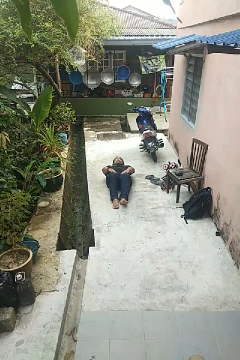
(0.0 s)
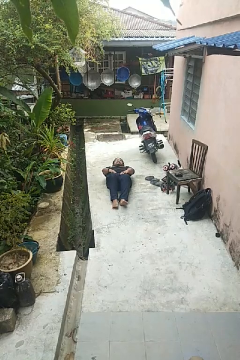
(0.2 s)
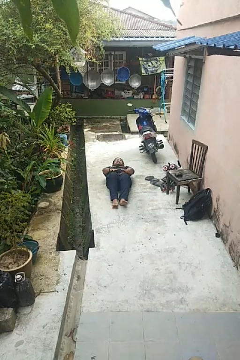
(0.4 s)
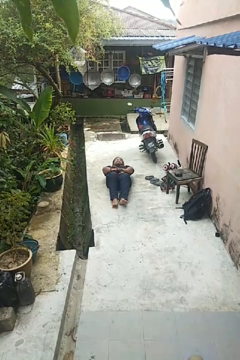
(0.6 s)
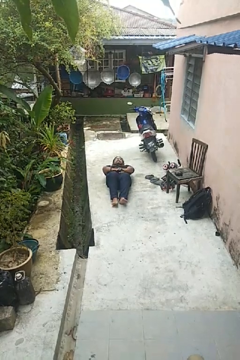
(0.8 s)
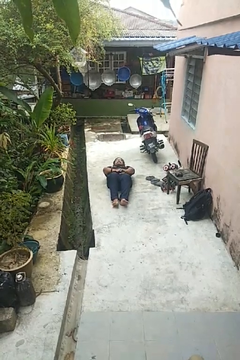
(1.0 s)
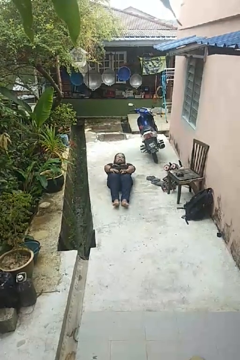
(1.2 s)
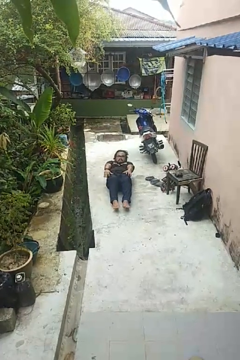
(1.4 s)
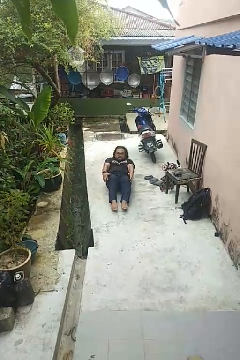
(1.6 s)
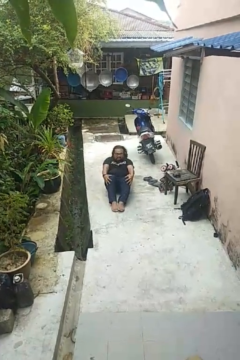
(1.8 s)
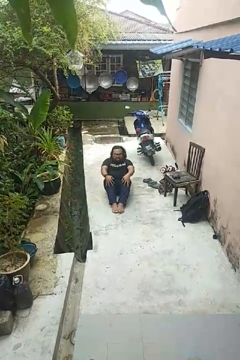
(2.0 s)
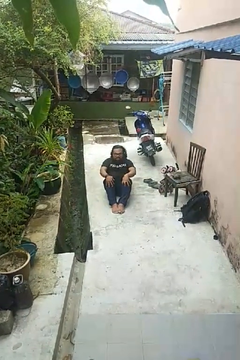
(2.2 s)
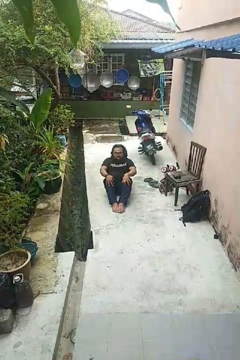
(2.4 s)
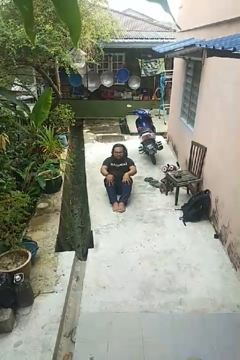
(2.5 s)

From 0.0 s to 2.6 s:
person exercises with situp

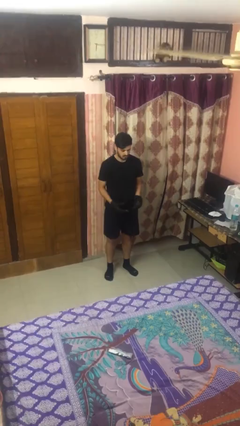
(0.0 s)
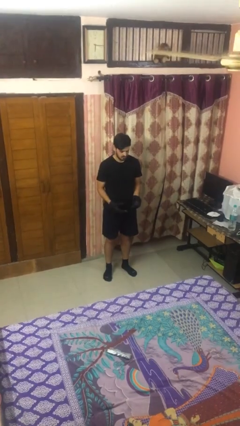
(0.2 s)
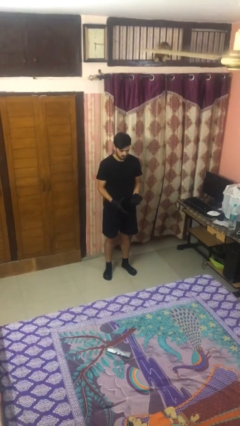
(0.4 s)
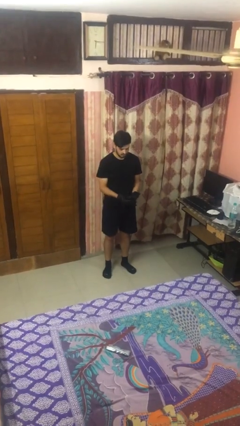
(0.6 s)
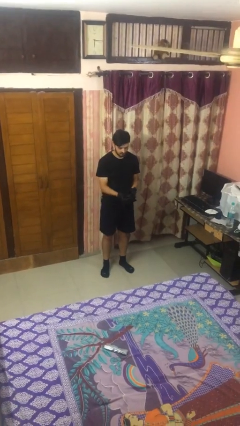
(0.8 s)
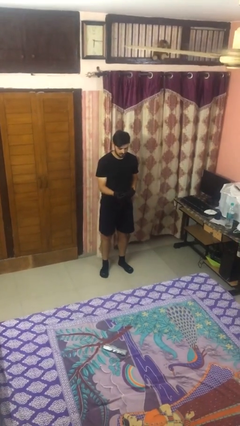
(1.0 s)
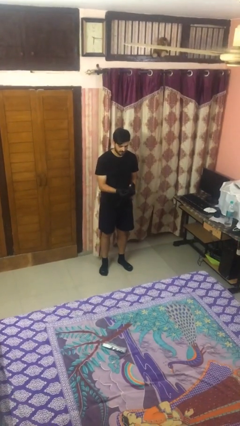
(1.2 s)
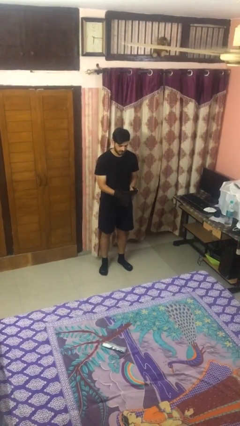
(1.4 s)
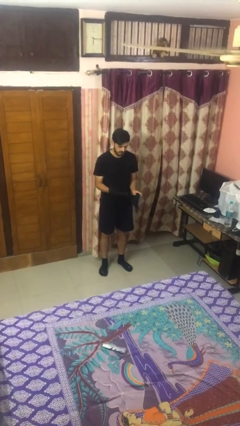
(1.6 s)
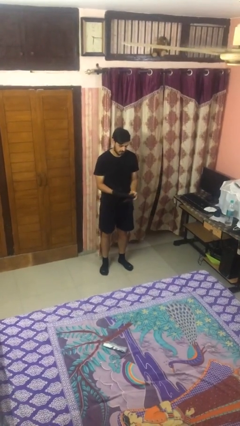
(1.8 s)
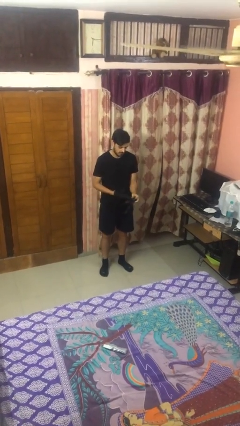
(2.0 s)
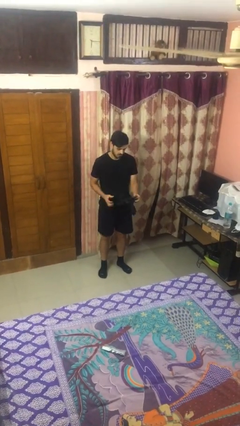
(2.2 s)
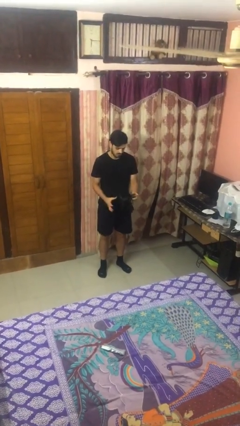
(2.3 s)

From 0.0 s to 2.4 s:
person takes off gloves

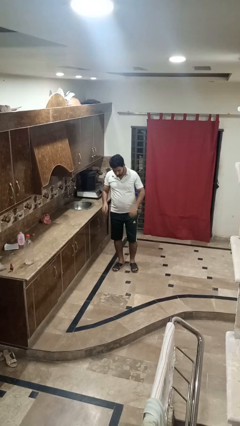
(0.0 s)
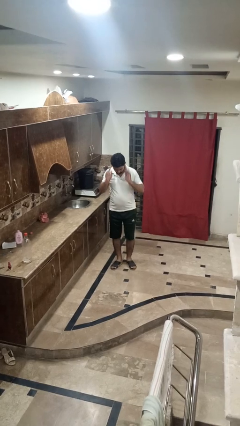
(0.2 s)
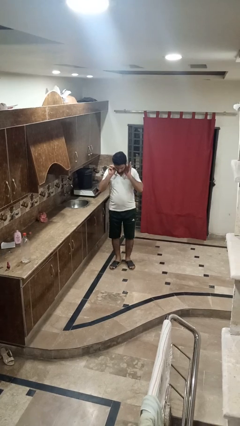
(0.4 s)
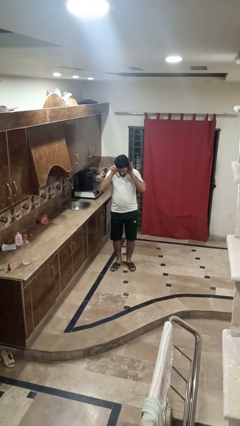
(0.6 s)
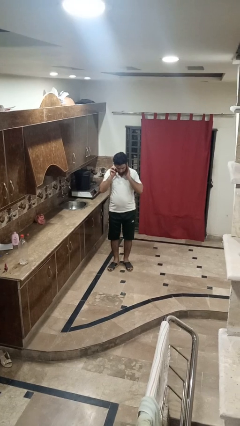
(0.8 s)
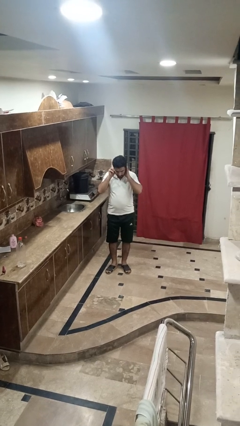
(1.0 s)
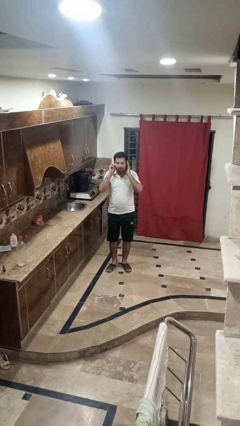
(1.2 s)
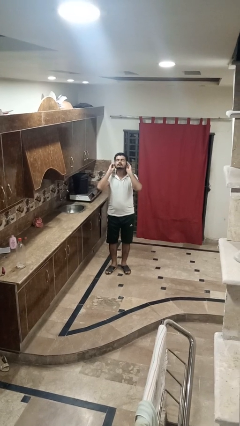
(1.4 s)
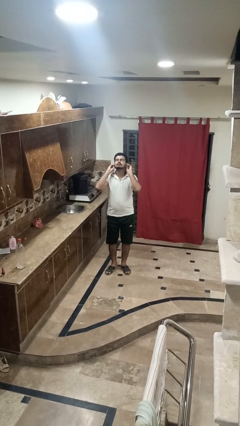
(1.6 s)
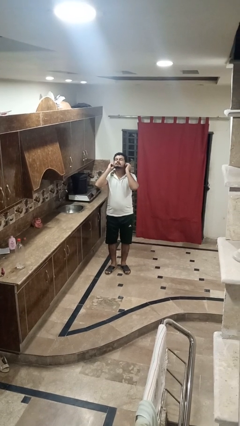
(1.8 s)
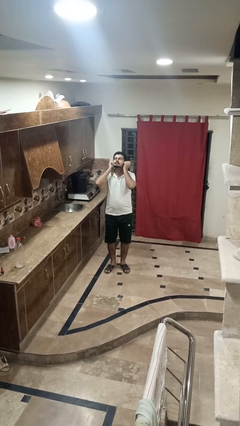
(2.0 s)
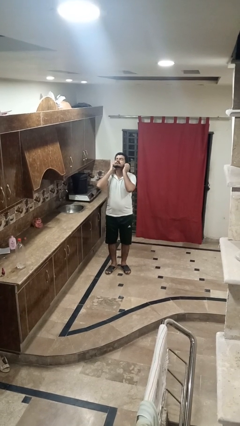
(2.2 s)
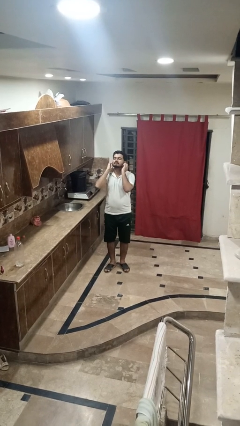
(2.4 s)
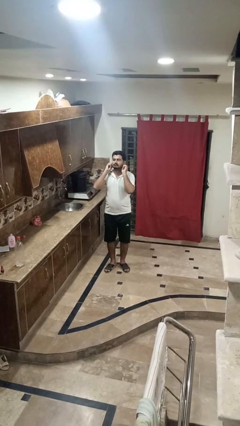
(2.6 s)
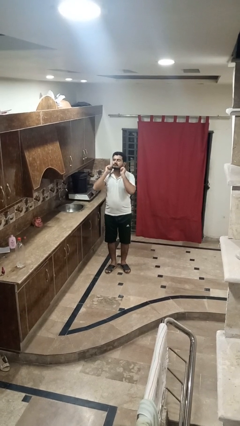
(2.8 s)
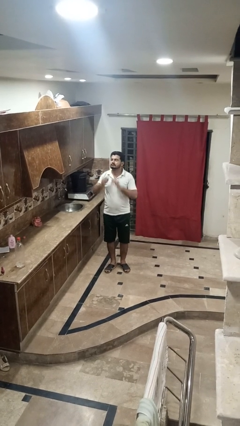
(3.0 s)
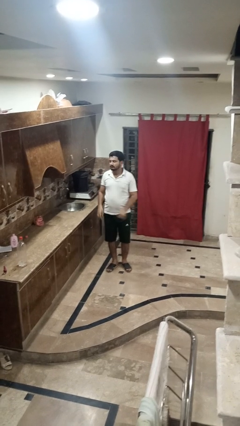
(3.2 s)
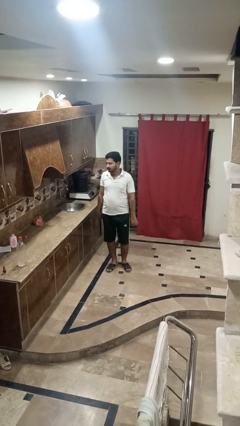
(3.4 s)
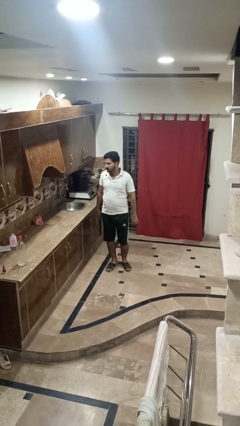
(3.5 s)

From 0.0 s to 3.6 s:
person touches earlobe

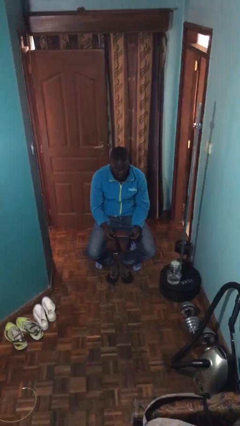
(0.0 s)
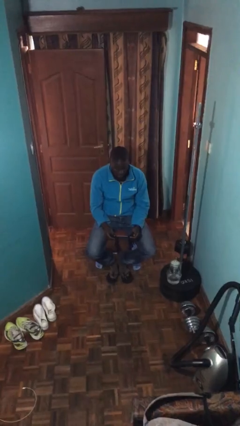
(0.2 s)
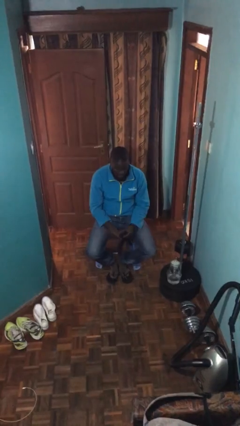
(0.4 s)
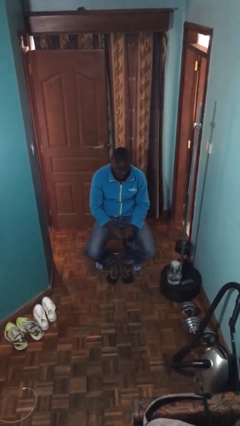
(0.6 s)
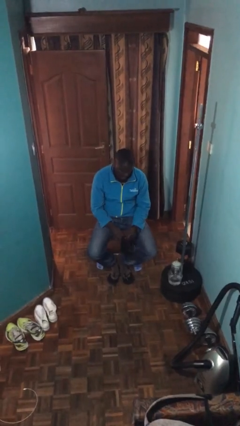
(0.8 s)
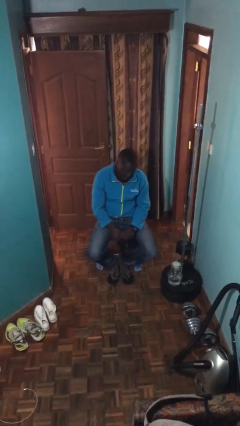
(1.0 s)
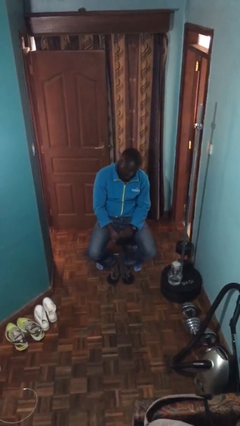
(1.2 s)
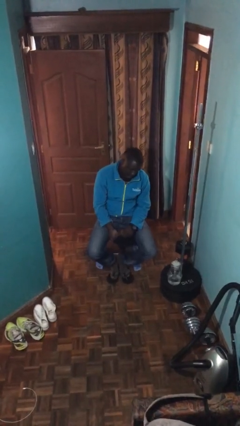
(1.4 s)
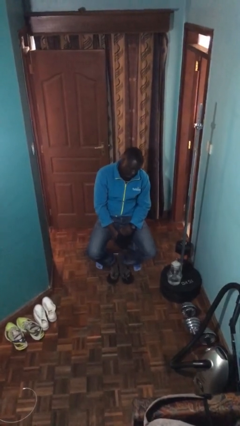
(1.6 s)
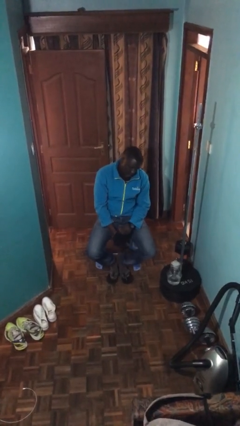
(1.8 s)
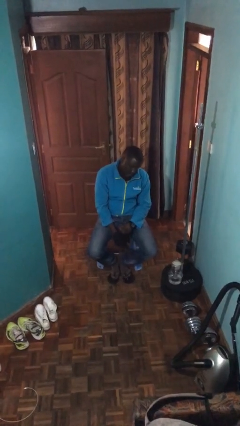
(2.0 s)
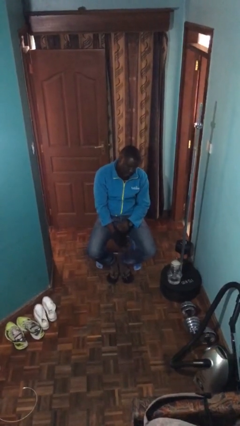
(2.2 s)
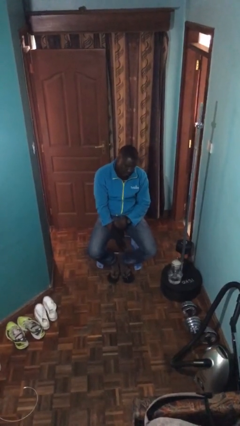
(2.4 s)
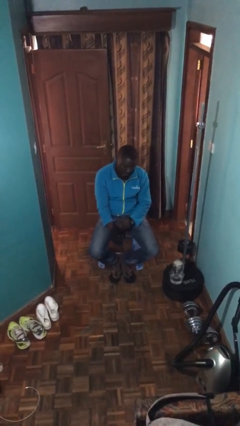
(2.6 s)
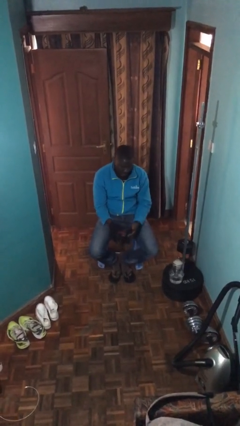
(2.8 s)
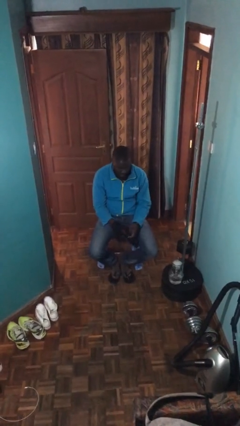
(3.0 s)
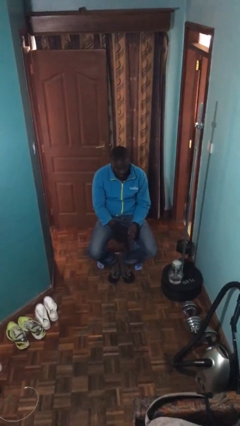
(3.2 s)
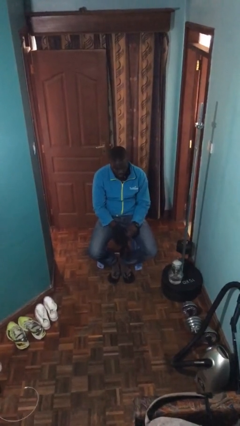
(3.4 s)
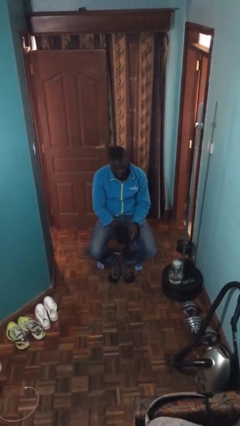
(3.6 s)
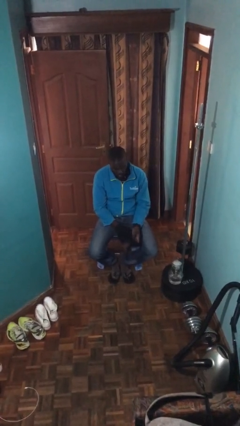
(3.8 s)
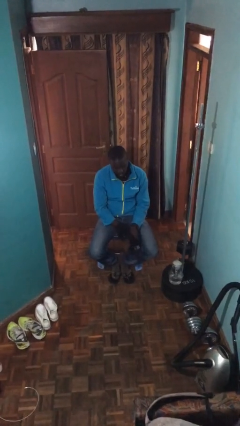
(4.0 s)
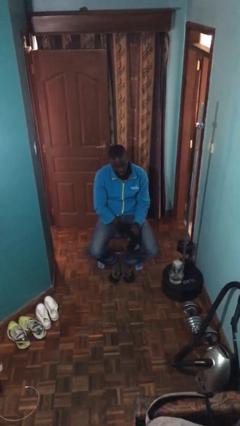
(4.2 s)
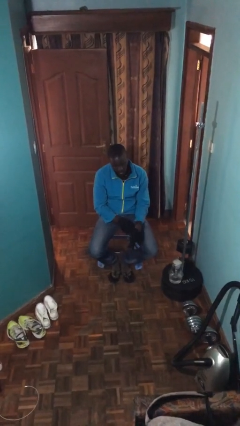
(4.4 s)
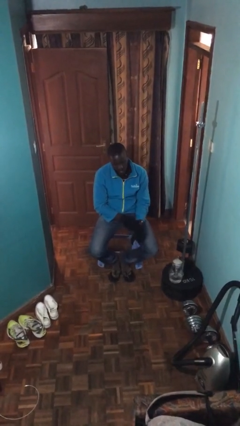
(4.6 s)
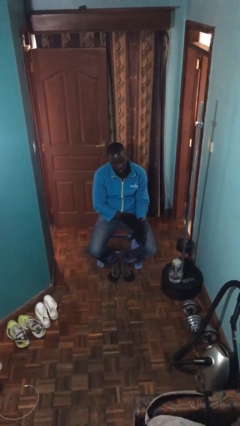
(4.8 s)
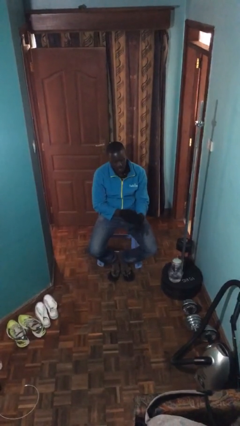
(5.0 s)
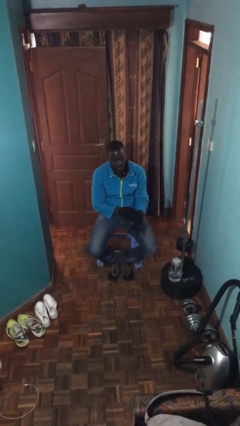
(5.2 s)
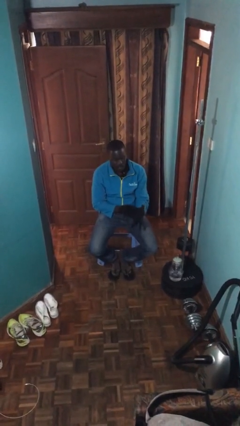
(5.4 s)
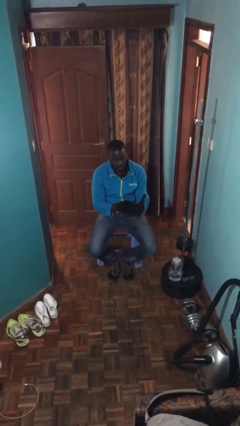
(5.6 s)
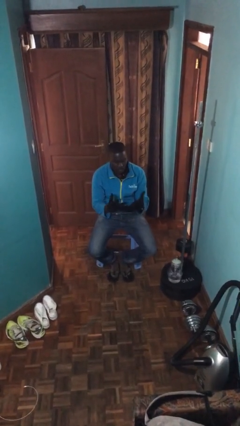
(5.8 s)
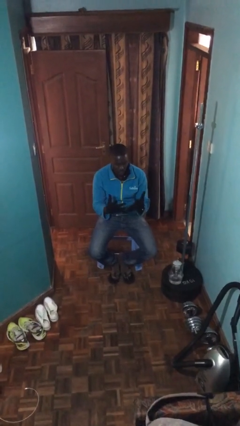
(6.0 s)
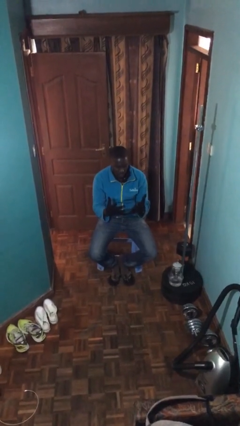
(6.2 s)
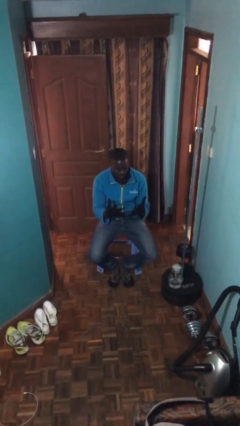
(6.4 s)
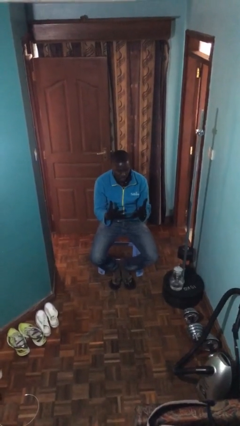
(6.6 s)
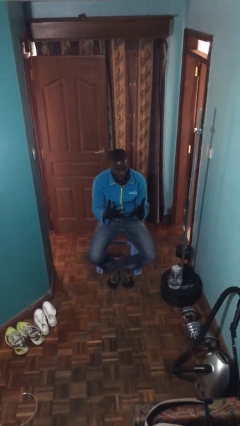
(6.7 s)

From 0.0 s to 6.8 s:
person puts on gloves

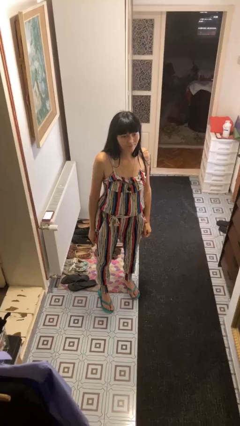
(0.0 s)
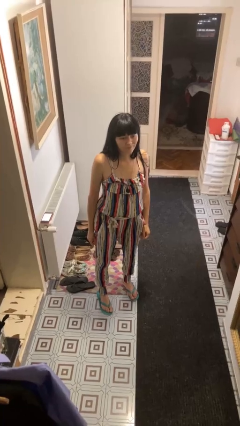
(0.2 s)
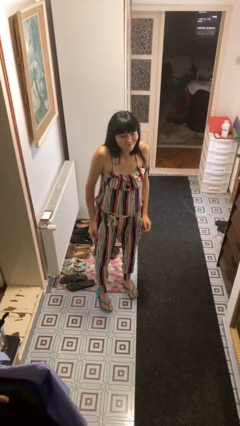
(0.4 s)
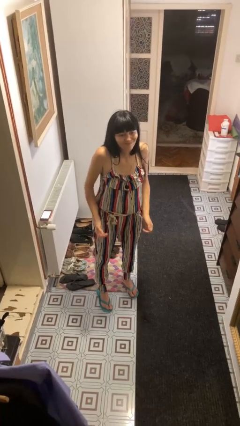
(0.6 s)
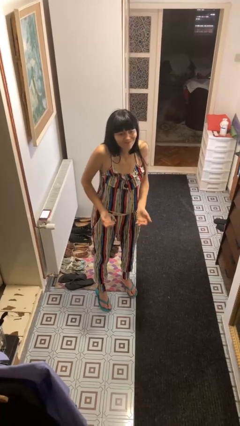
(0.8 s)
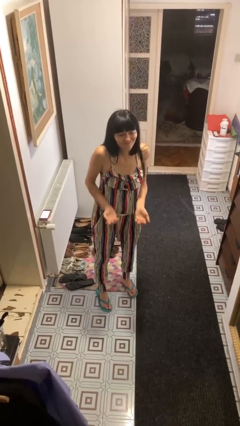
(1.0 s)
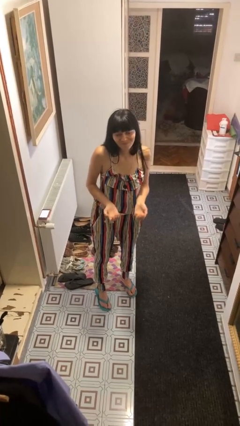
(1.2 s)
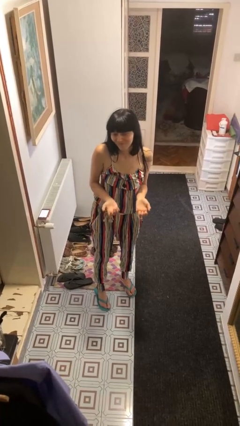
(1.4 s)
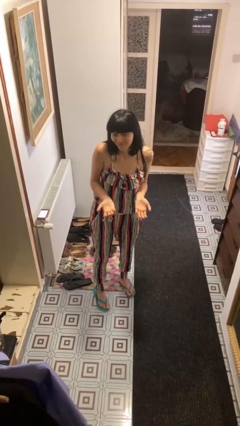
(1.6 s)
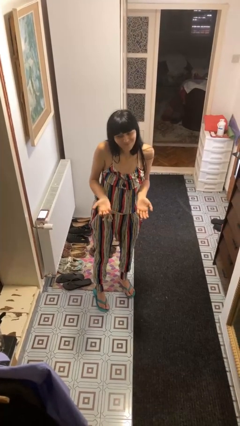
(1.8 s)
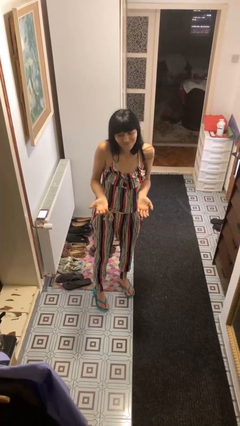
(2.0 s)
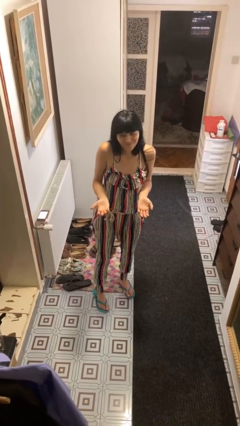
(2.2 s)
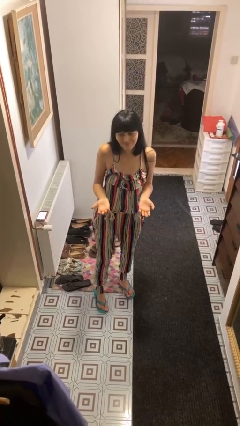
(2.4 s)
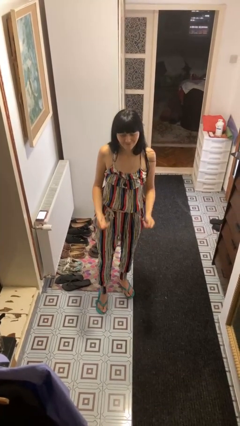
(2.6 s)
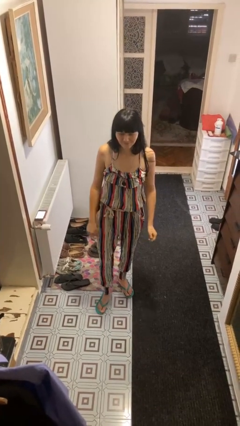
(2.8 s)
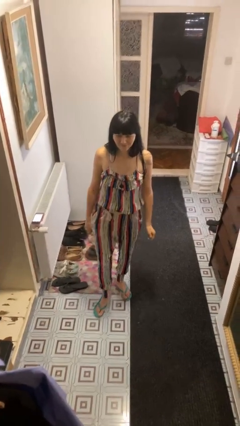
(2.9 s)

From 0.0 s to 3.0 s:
person shrugs
